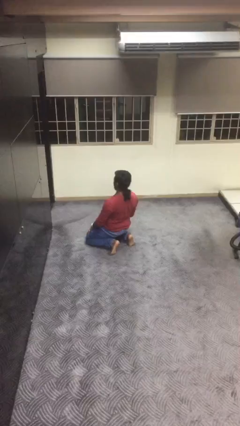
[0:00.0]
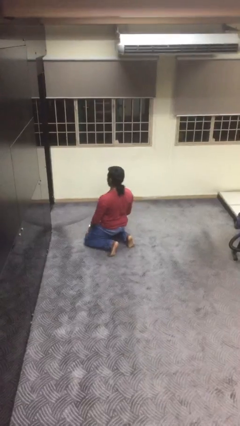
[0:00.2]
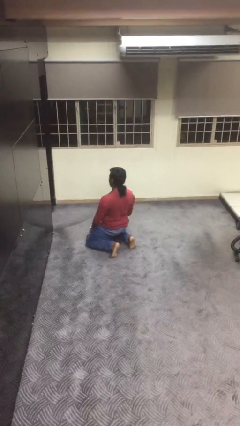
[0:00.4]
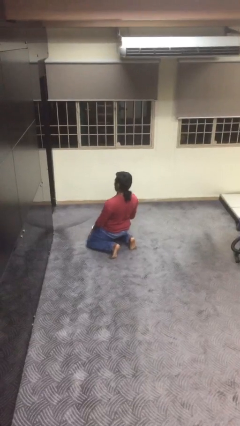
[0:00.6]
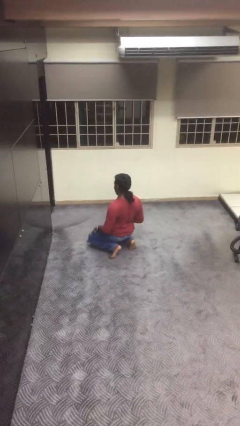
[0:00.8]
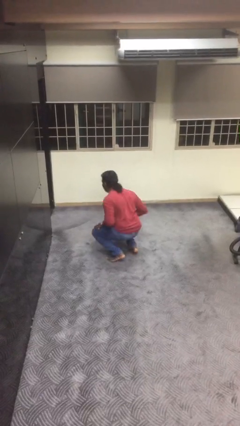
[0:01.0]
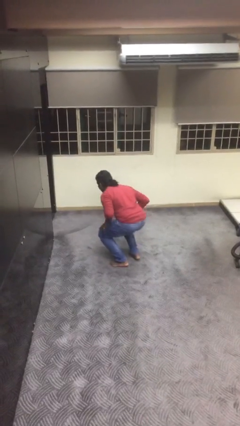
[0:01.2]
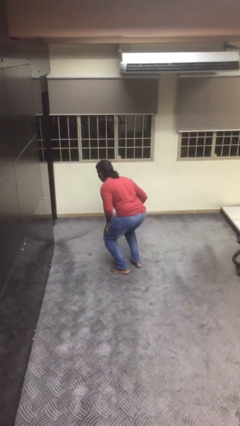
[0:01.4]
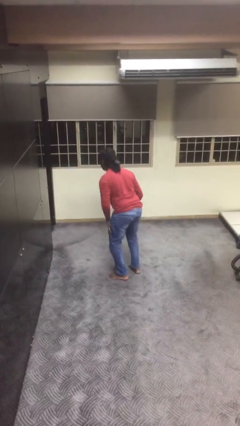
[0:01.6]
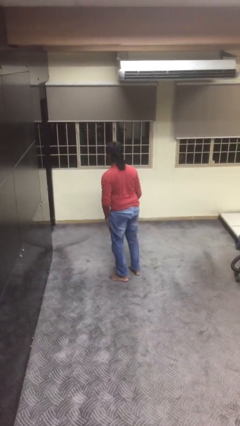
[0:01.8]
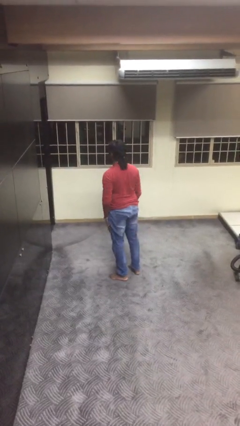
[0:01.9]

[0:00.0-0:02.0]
person stands up from floor

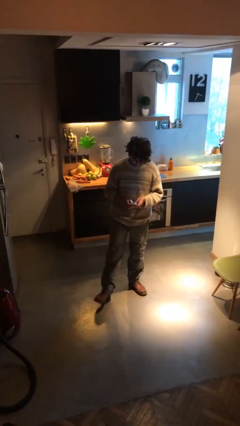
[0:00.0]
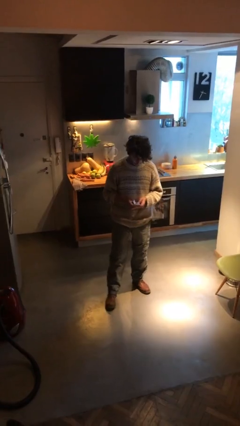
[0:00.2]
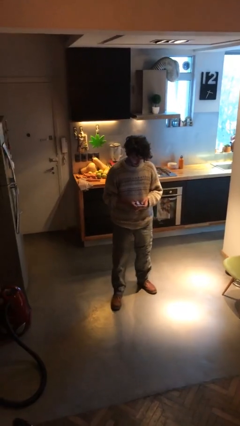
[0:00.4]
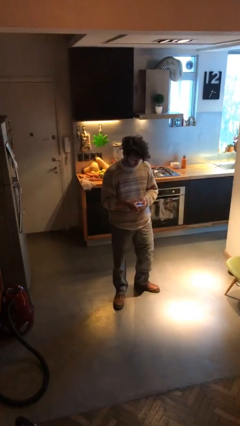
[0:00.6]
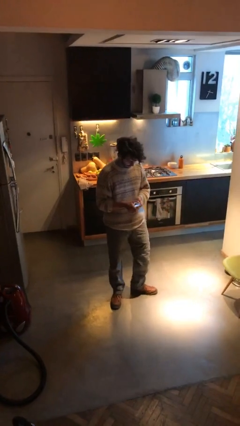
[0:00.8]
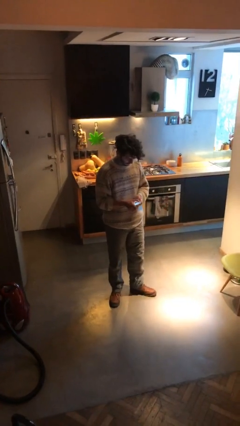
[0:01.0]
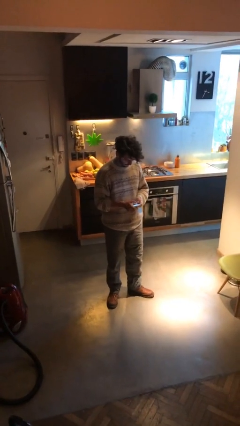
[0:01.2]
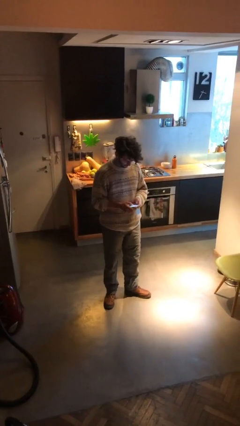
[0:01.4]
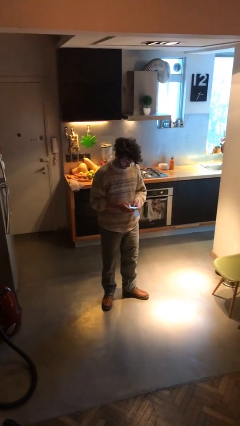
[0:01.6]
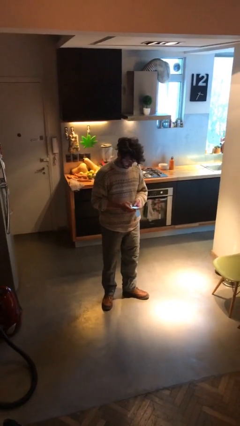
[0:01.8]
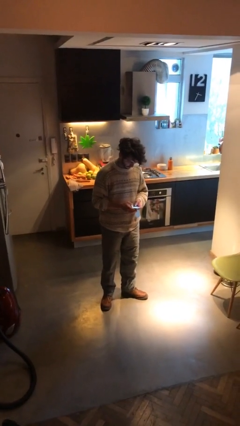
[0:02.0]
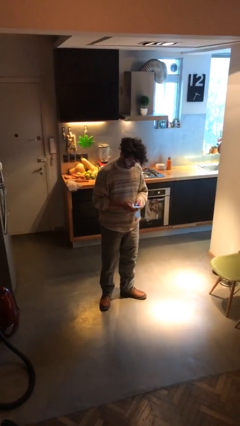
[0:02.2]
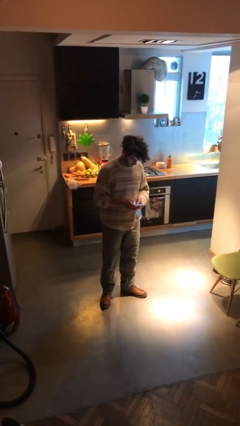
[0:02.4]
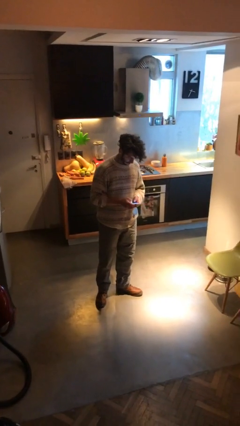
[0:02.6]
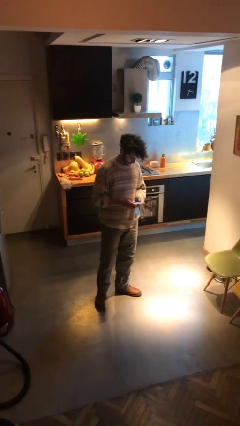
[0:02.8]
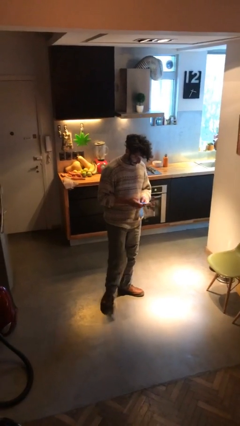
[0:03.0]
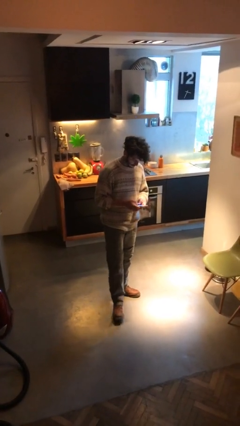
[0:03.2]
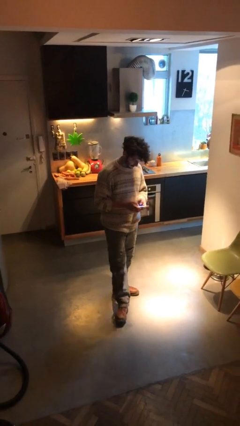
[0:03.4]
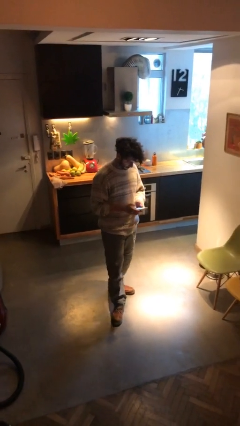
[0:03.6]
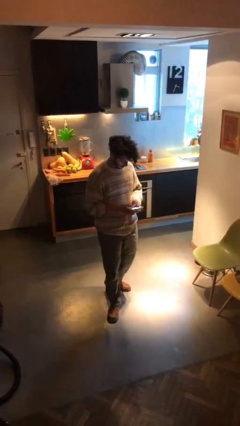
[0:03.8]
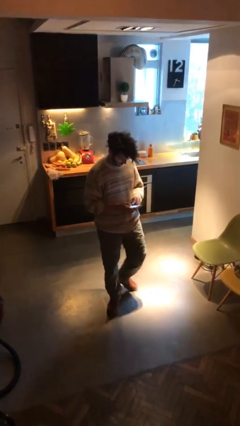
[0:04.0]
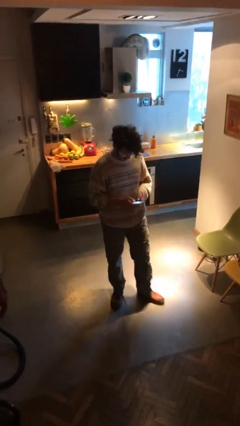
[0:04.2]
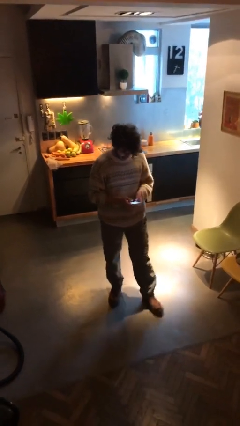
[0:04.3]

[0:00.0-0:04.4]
person texts on phone

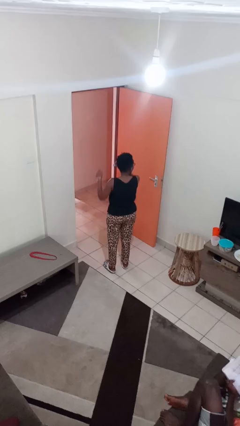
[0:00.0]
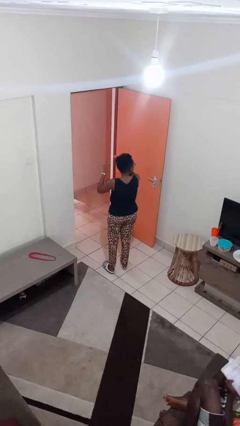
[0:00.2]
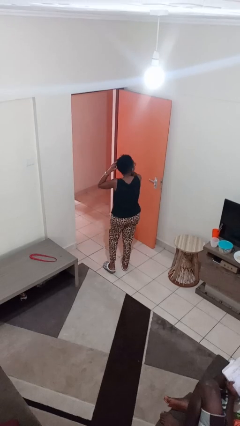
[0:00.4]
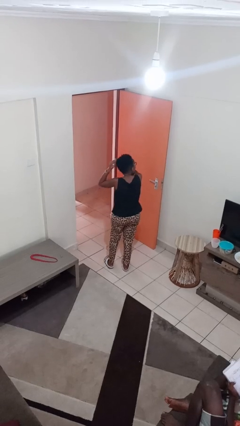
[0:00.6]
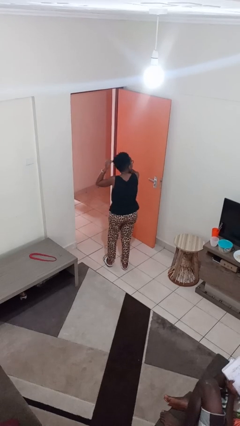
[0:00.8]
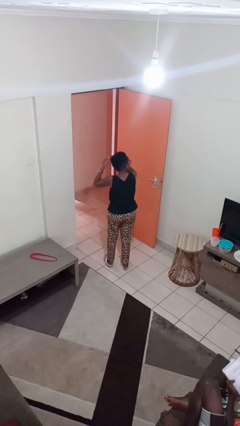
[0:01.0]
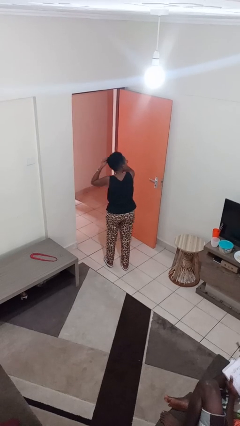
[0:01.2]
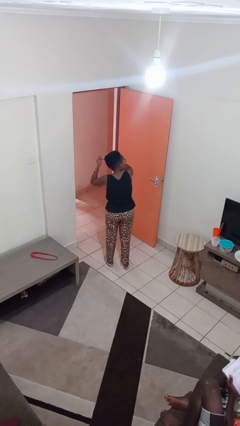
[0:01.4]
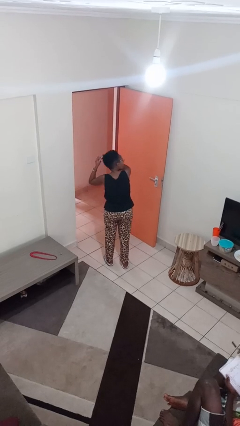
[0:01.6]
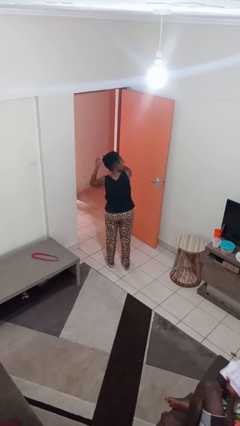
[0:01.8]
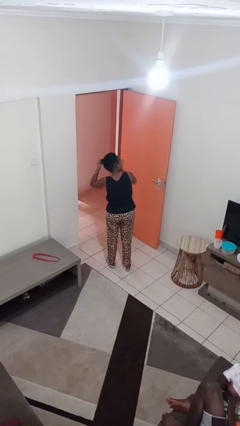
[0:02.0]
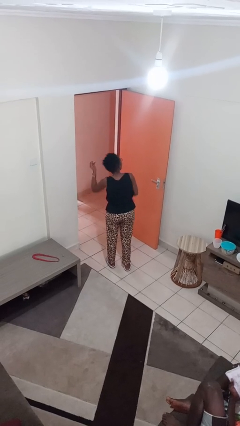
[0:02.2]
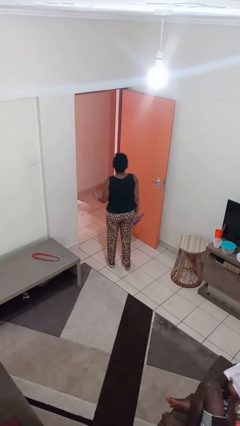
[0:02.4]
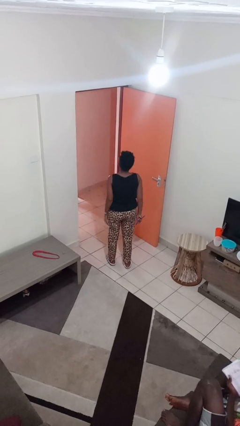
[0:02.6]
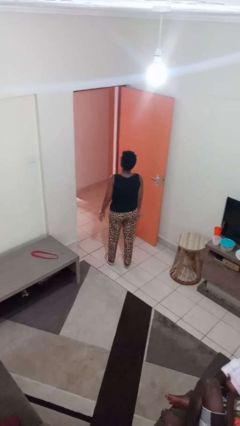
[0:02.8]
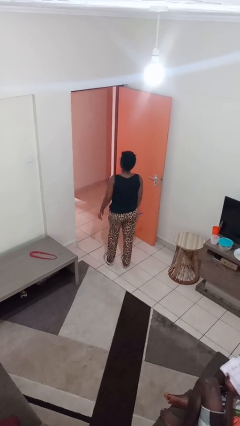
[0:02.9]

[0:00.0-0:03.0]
person brushes hair

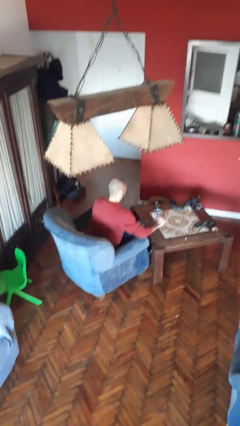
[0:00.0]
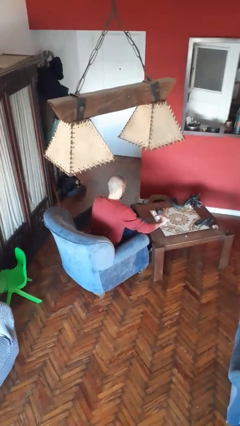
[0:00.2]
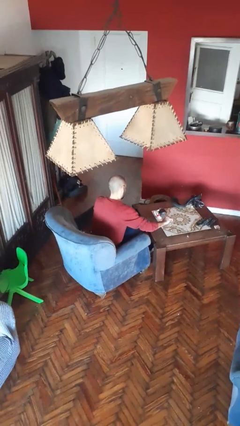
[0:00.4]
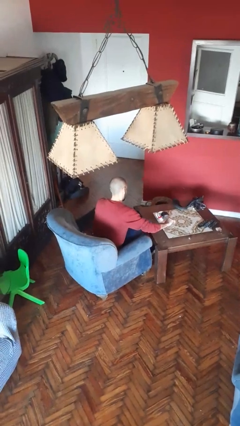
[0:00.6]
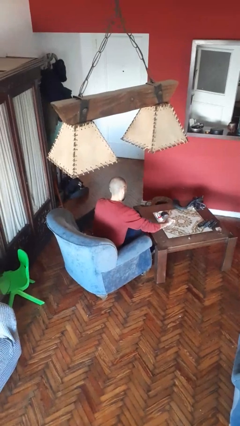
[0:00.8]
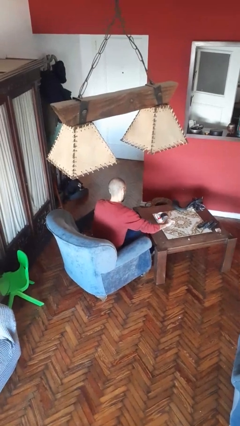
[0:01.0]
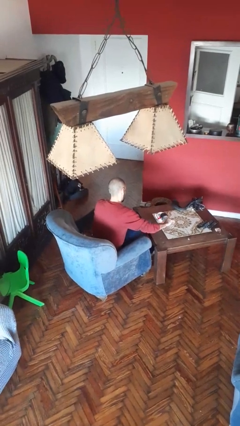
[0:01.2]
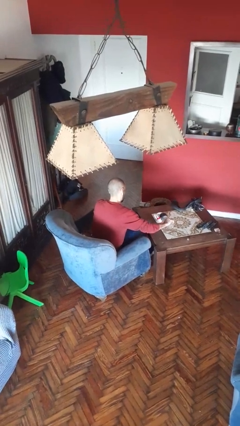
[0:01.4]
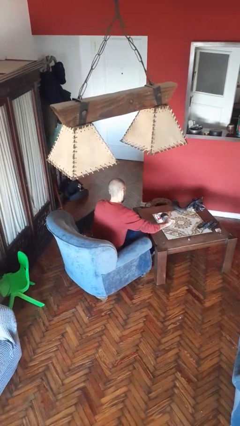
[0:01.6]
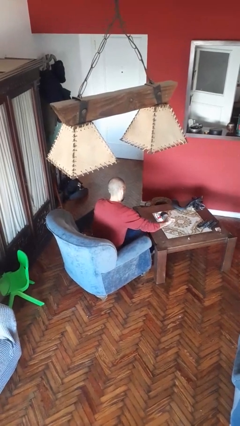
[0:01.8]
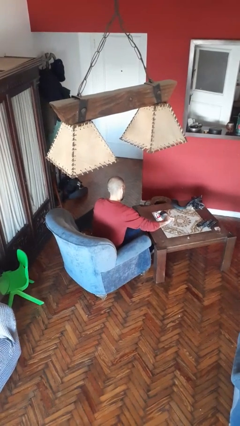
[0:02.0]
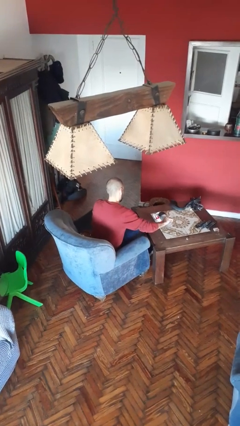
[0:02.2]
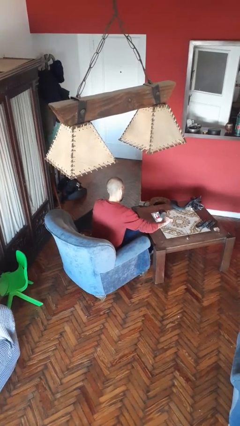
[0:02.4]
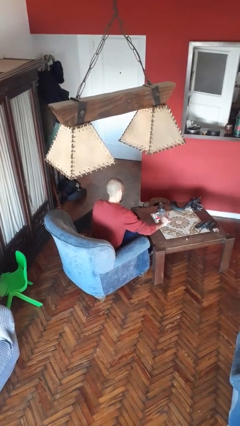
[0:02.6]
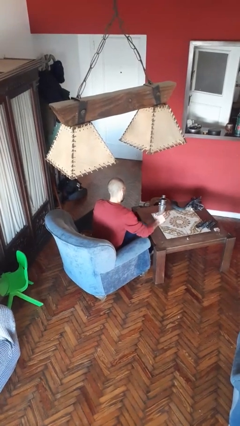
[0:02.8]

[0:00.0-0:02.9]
person pours liquid into cup

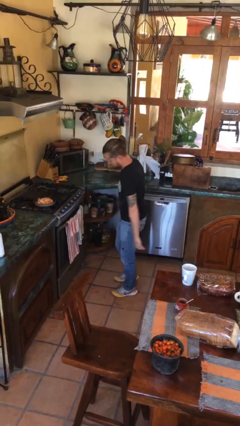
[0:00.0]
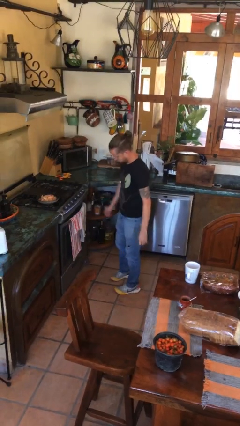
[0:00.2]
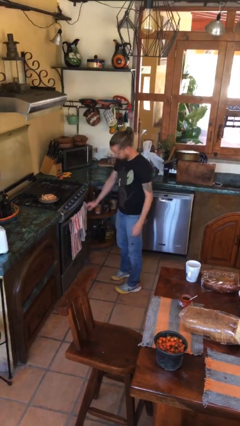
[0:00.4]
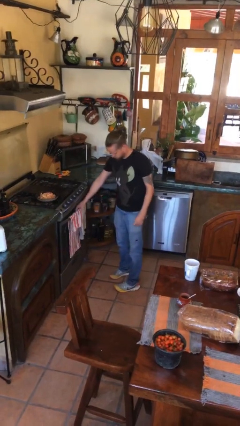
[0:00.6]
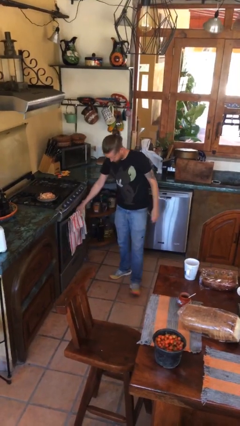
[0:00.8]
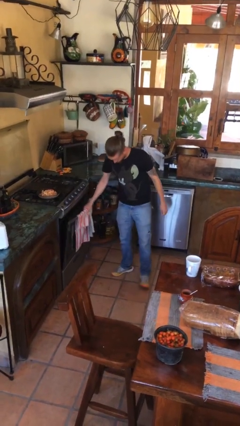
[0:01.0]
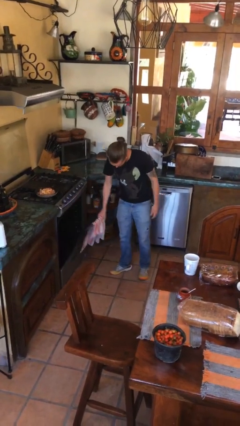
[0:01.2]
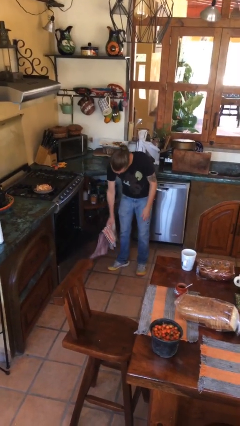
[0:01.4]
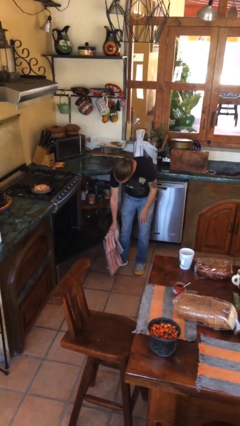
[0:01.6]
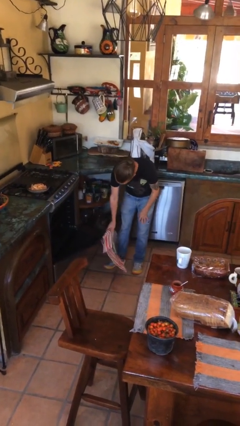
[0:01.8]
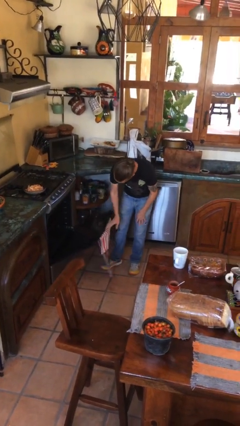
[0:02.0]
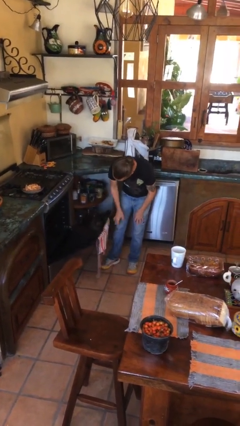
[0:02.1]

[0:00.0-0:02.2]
person opens oven door

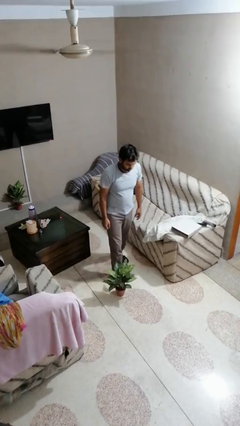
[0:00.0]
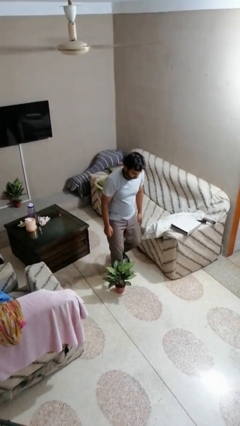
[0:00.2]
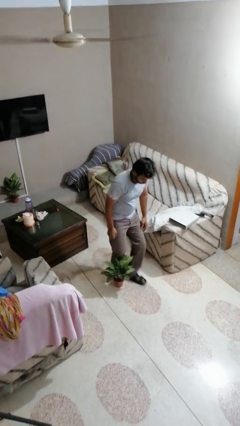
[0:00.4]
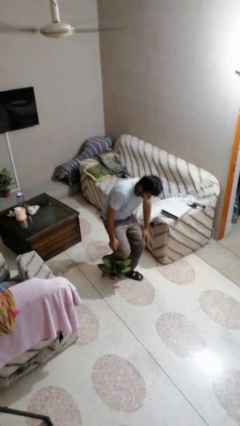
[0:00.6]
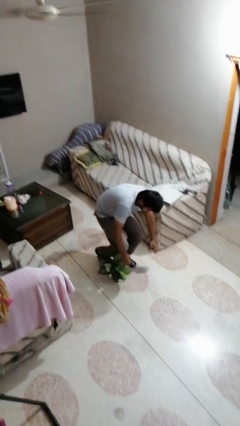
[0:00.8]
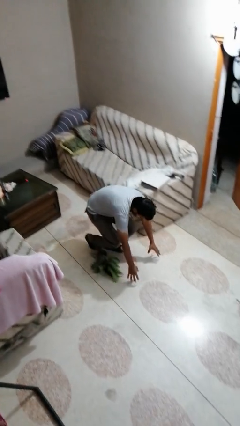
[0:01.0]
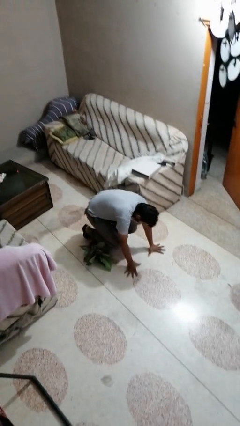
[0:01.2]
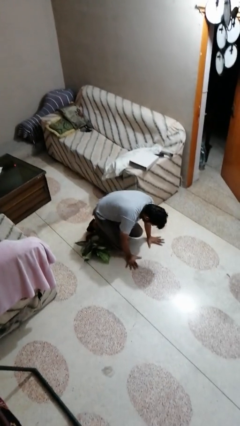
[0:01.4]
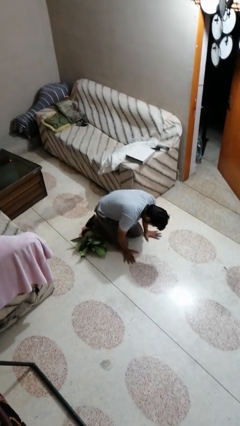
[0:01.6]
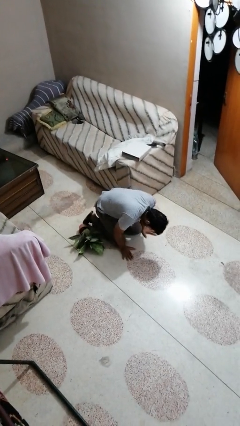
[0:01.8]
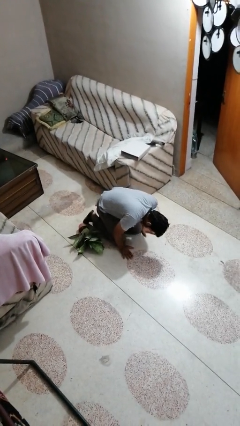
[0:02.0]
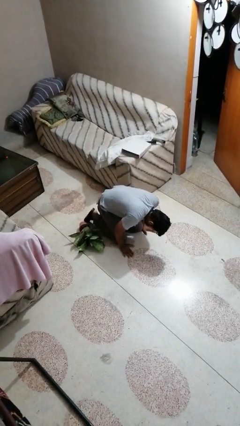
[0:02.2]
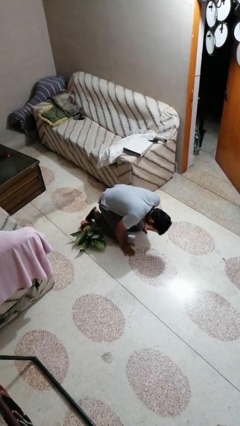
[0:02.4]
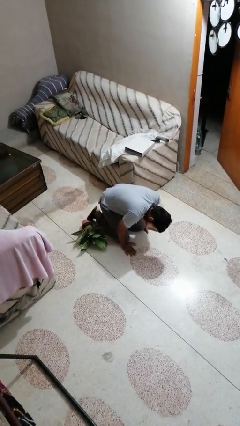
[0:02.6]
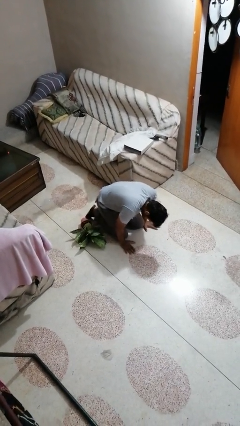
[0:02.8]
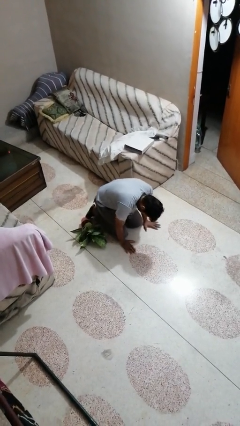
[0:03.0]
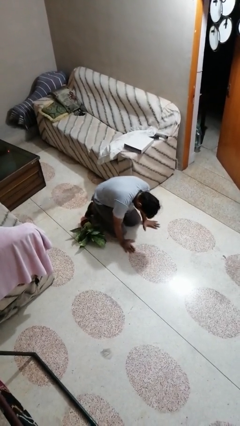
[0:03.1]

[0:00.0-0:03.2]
person trips on object on floor
